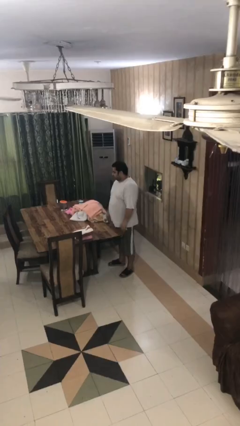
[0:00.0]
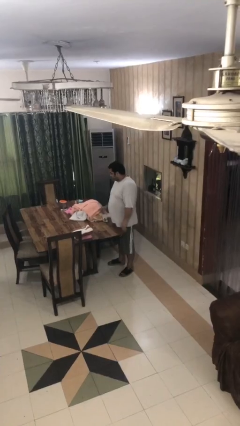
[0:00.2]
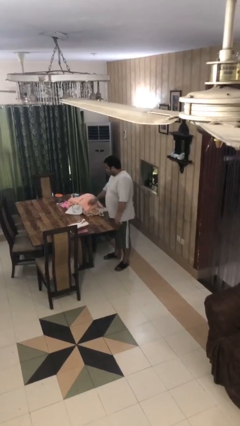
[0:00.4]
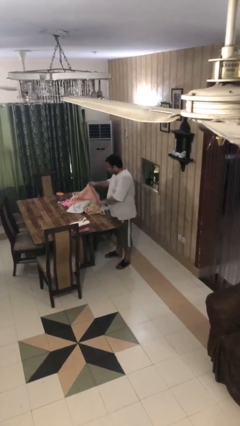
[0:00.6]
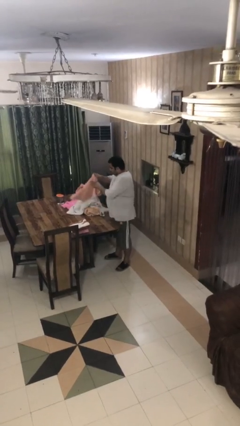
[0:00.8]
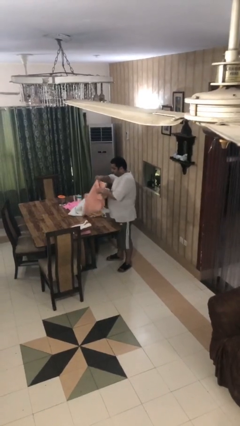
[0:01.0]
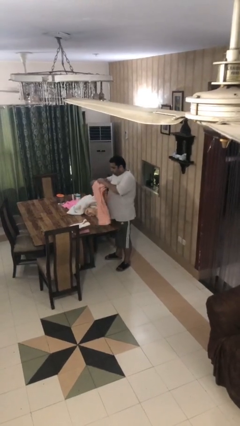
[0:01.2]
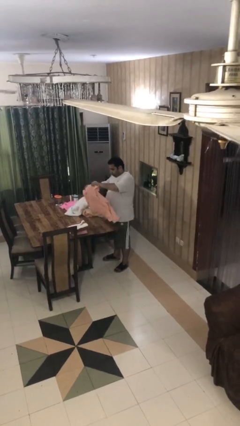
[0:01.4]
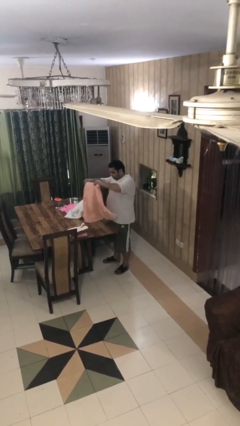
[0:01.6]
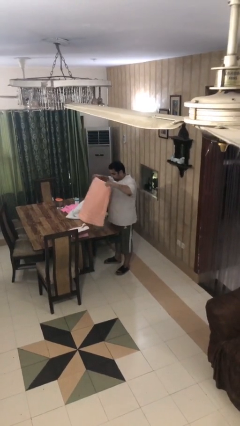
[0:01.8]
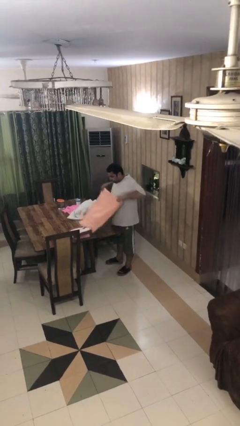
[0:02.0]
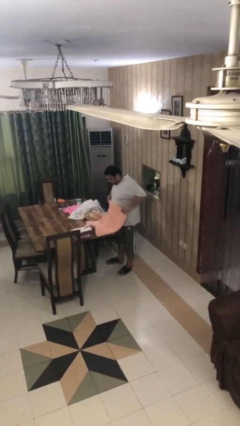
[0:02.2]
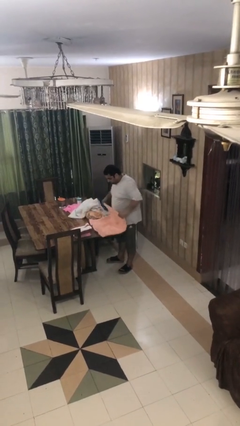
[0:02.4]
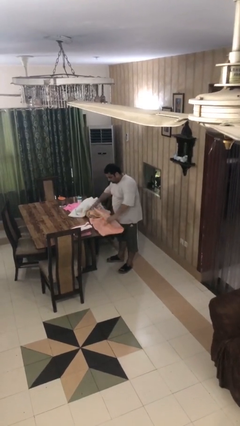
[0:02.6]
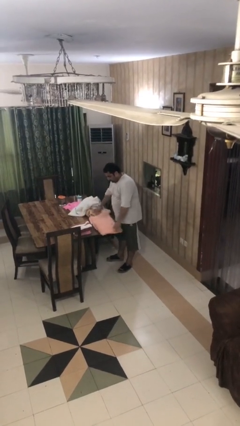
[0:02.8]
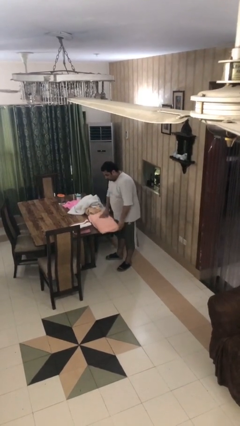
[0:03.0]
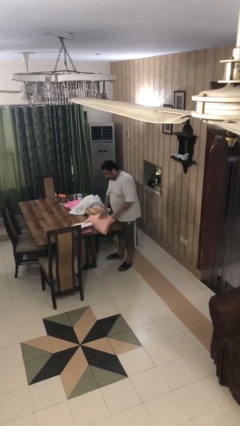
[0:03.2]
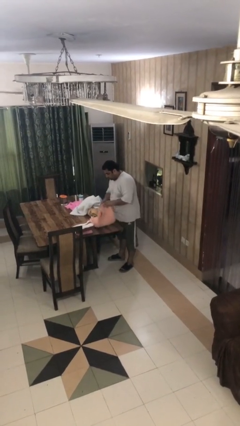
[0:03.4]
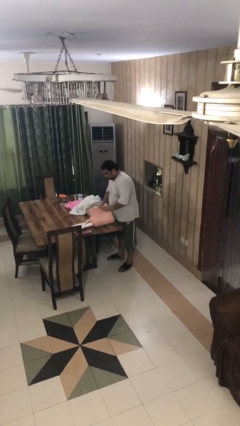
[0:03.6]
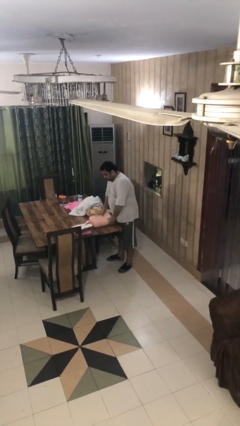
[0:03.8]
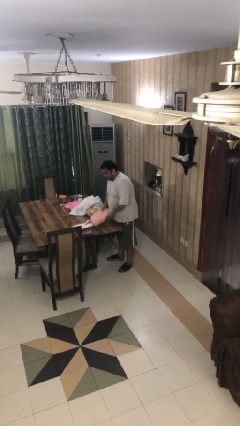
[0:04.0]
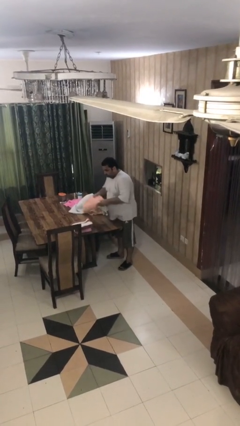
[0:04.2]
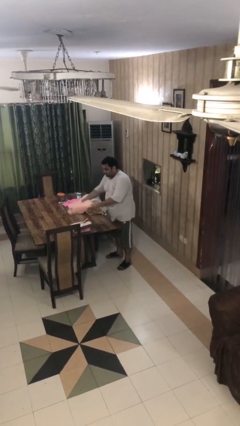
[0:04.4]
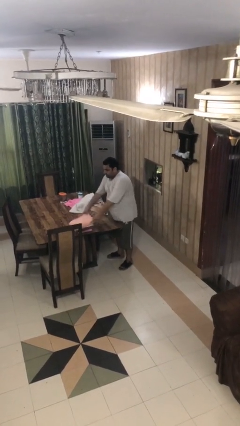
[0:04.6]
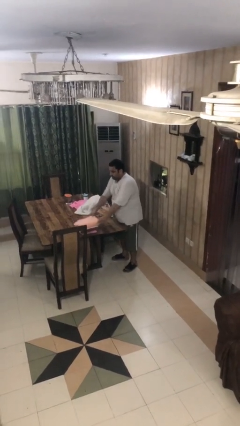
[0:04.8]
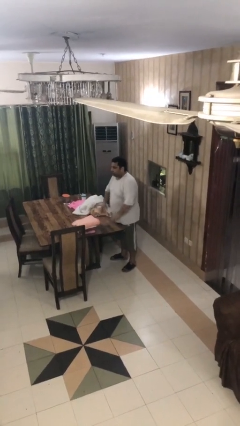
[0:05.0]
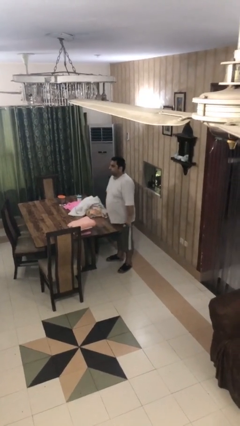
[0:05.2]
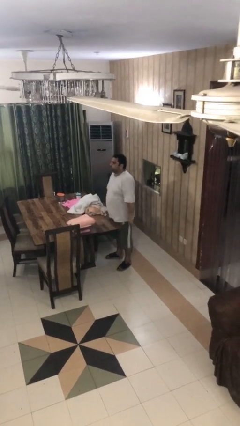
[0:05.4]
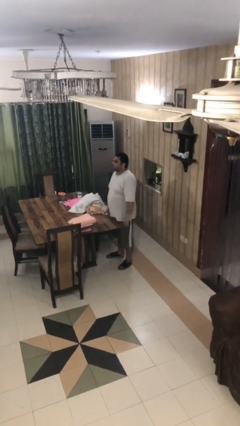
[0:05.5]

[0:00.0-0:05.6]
person folds towel

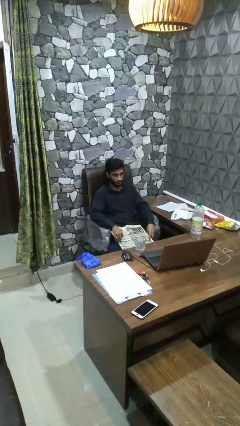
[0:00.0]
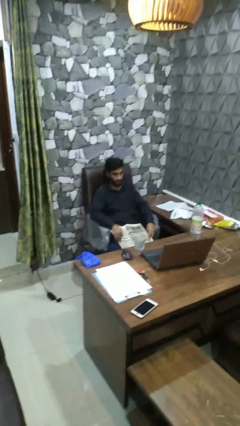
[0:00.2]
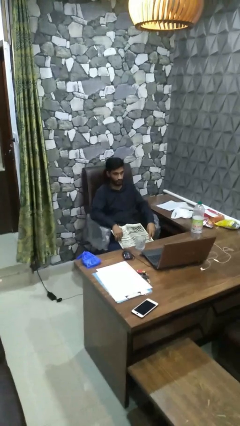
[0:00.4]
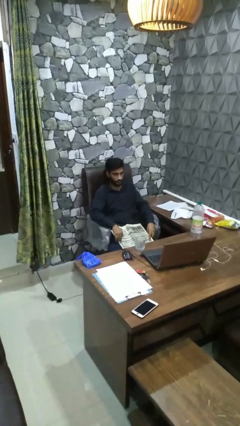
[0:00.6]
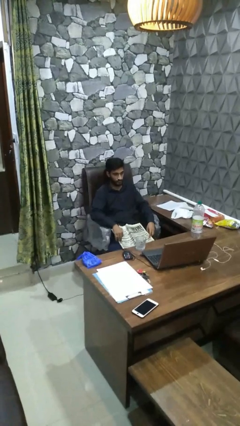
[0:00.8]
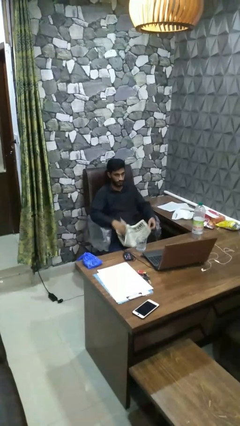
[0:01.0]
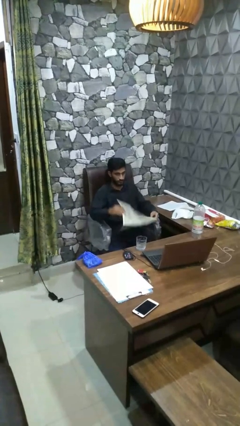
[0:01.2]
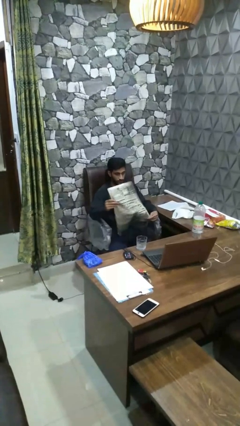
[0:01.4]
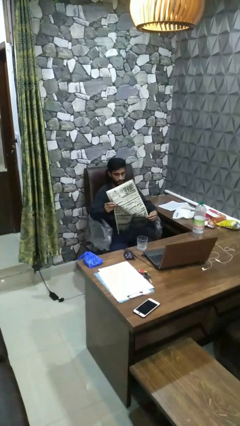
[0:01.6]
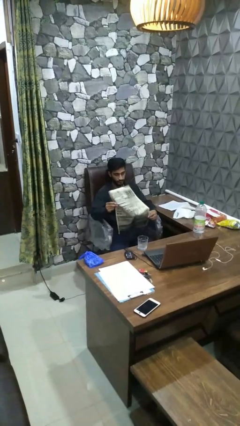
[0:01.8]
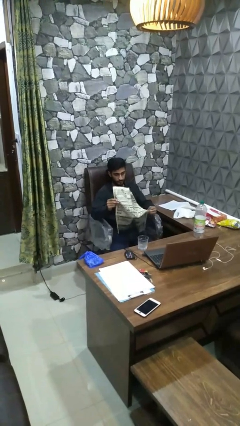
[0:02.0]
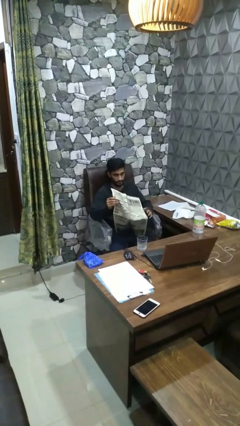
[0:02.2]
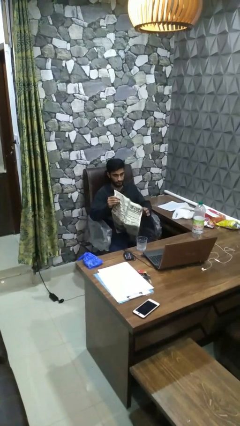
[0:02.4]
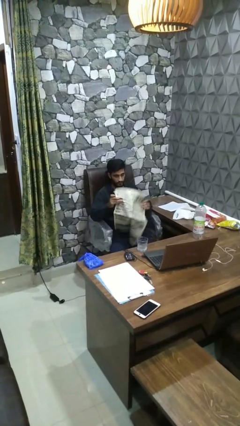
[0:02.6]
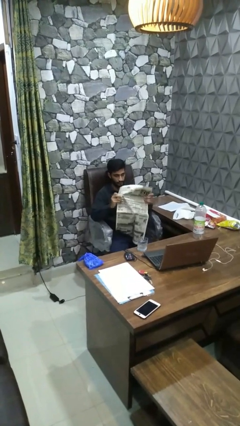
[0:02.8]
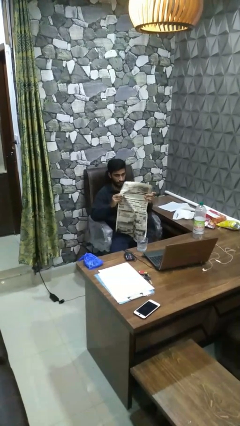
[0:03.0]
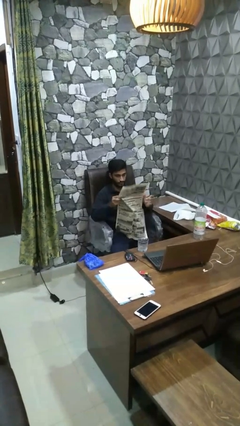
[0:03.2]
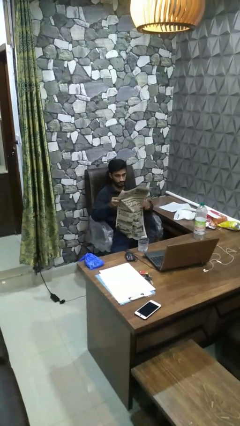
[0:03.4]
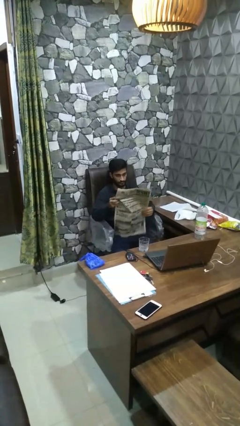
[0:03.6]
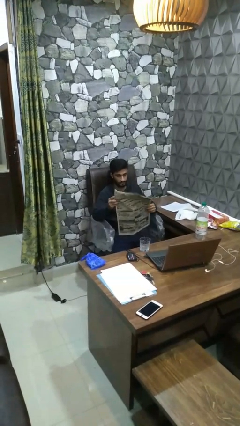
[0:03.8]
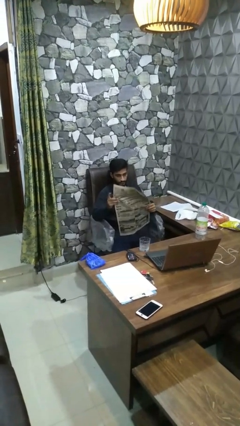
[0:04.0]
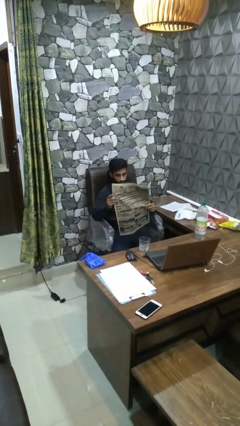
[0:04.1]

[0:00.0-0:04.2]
person reads newspaper

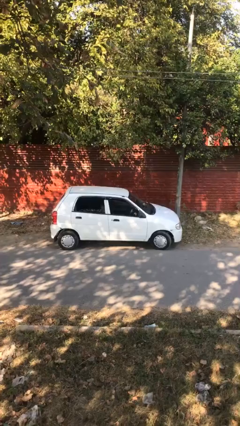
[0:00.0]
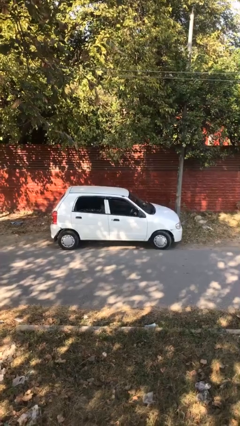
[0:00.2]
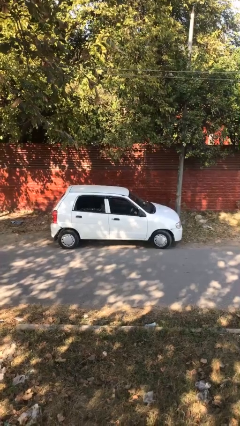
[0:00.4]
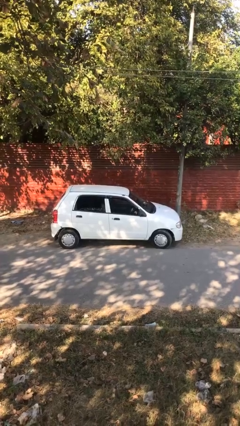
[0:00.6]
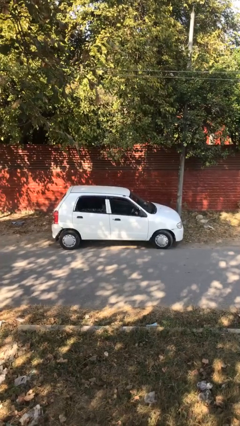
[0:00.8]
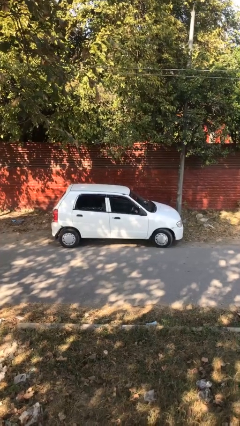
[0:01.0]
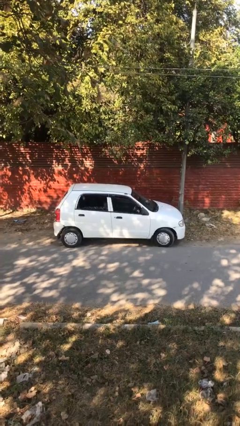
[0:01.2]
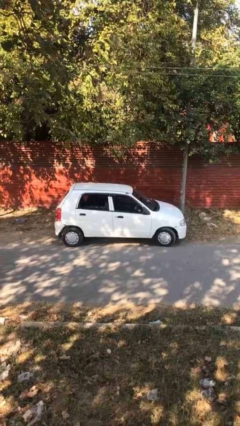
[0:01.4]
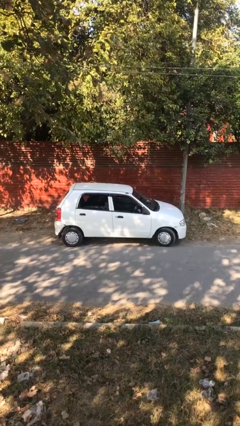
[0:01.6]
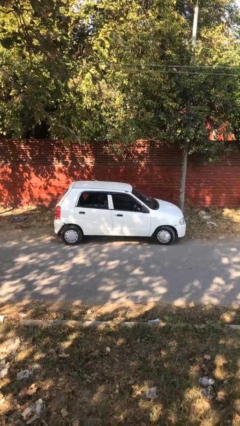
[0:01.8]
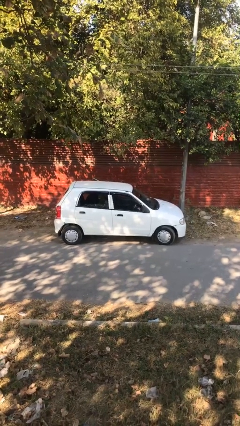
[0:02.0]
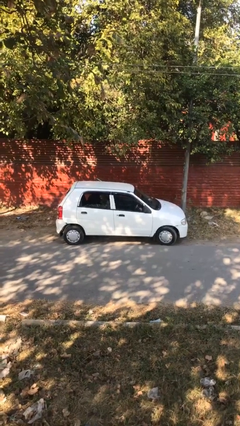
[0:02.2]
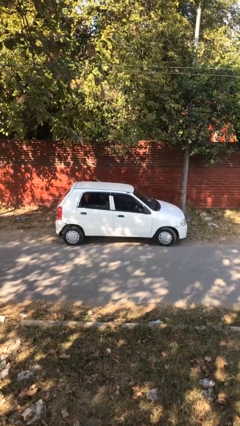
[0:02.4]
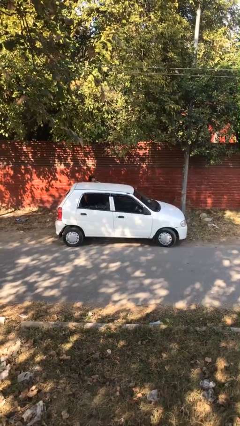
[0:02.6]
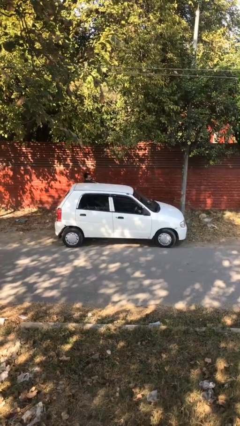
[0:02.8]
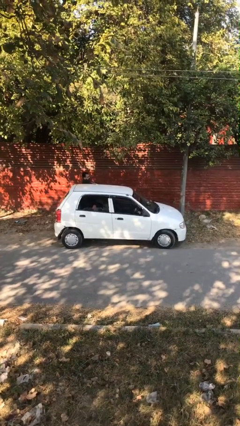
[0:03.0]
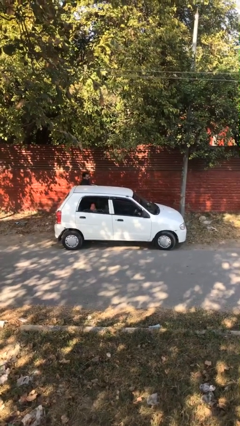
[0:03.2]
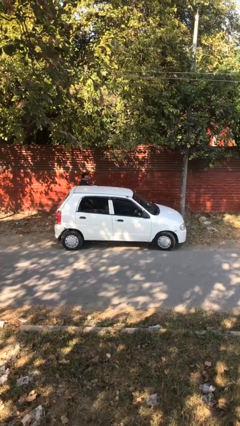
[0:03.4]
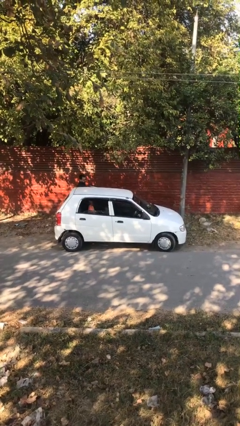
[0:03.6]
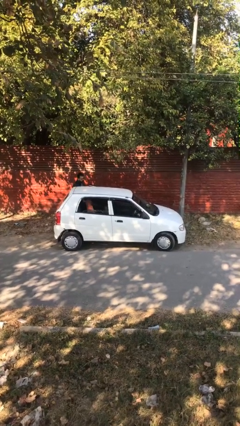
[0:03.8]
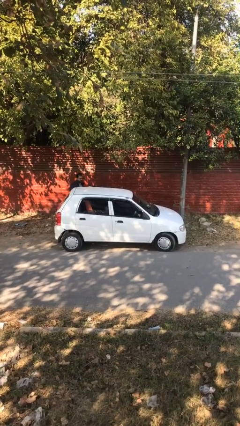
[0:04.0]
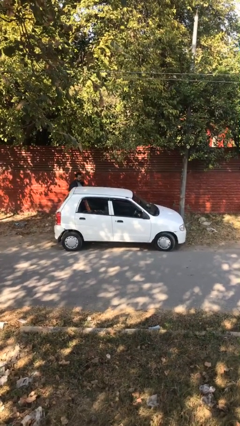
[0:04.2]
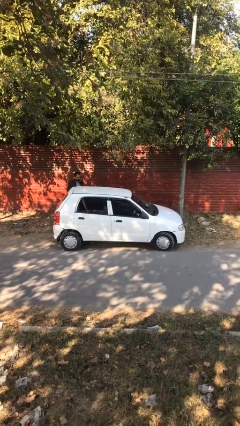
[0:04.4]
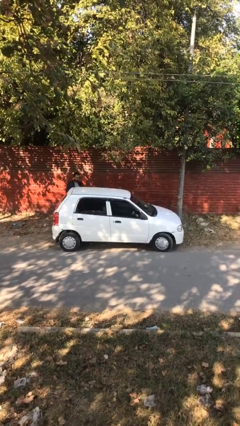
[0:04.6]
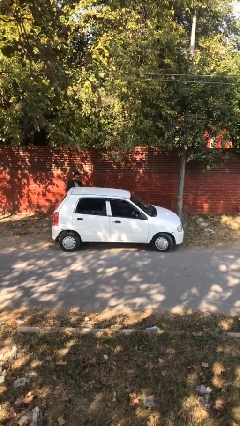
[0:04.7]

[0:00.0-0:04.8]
car drops off person

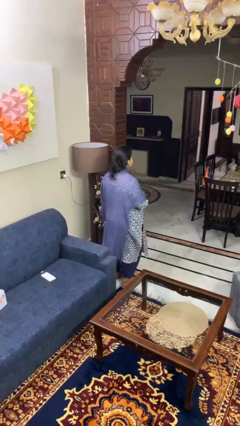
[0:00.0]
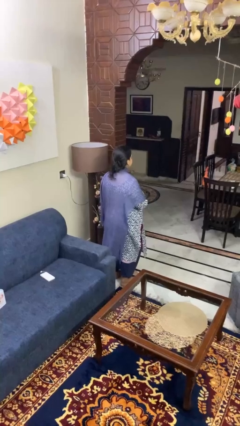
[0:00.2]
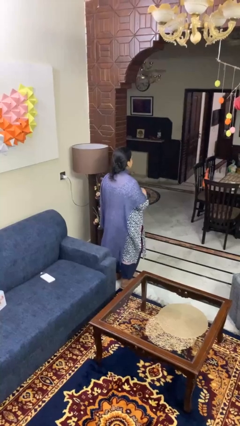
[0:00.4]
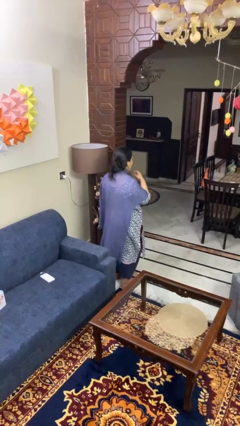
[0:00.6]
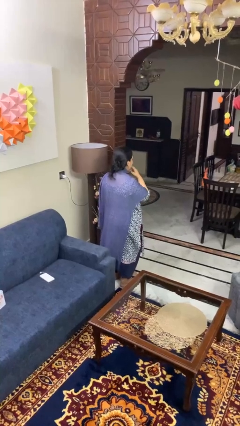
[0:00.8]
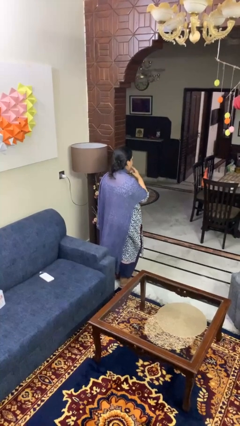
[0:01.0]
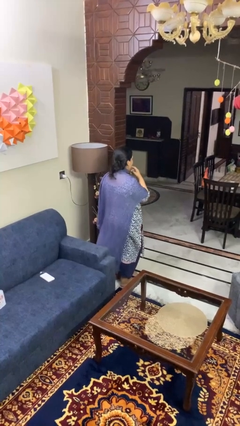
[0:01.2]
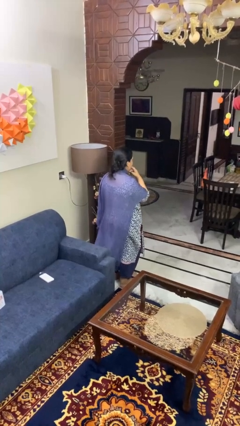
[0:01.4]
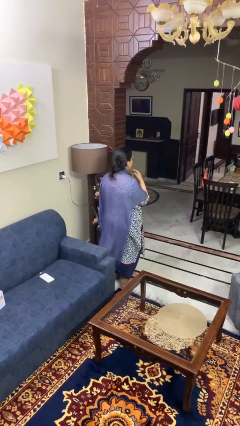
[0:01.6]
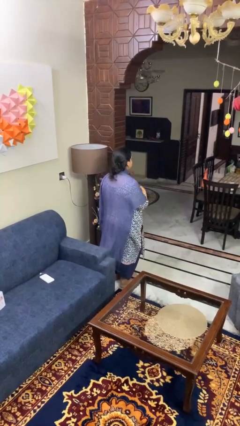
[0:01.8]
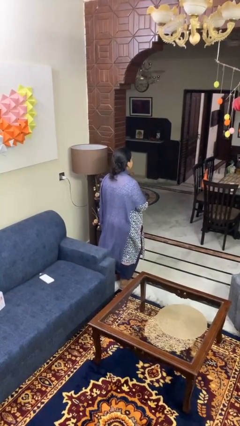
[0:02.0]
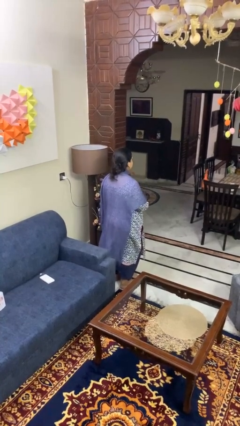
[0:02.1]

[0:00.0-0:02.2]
person licks fingers

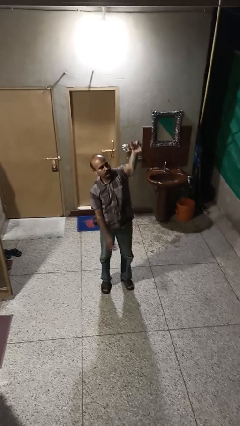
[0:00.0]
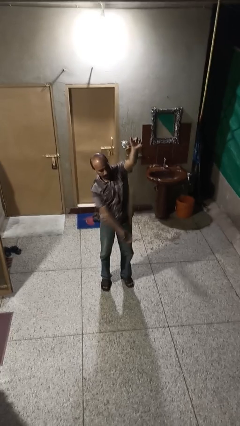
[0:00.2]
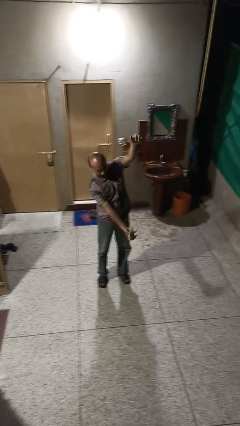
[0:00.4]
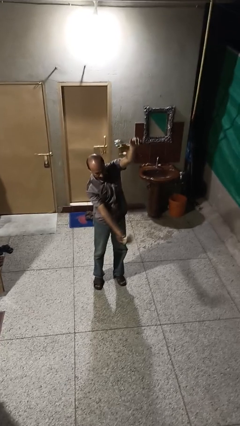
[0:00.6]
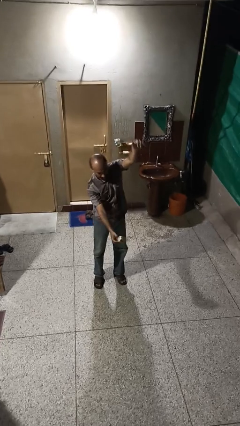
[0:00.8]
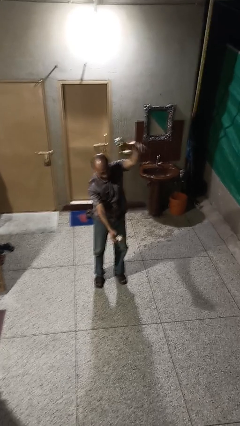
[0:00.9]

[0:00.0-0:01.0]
person drops object
